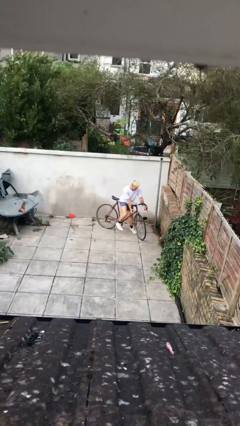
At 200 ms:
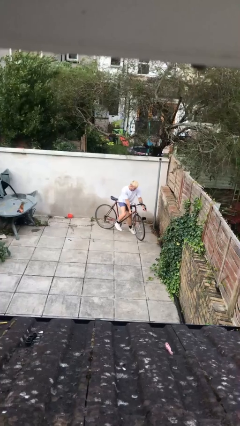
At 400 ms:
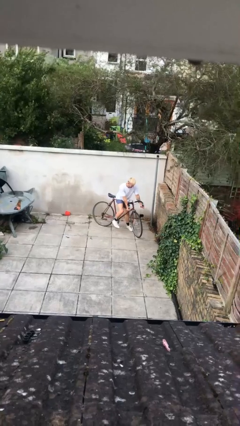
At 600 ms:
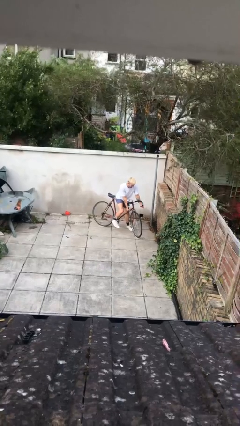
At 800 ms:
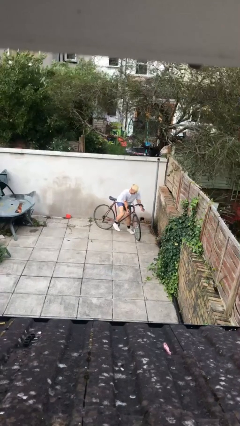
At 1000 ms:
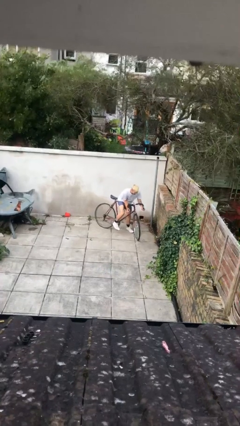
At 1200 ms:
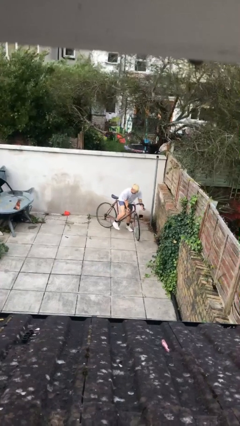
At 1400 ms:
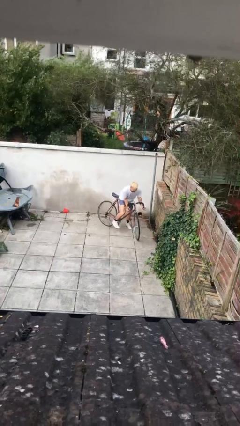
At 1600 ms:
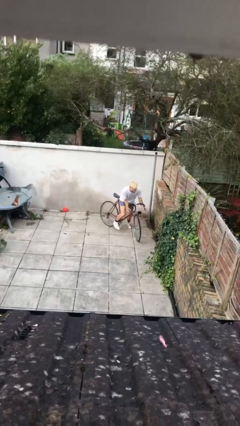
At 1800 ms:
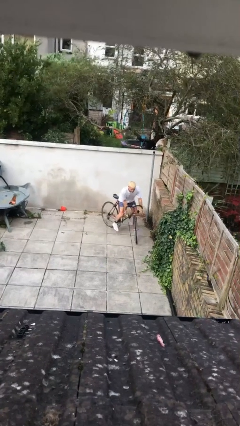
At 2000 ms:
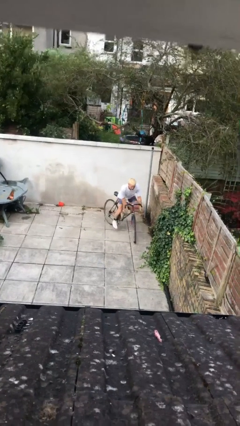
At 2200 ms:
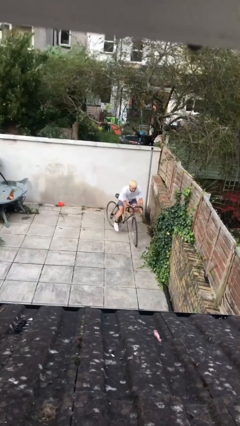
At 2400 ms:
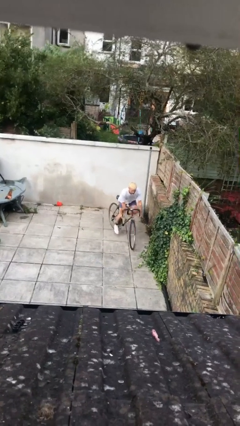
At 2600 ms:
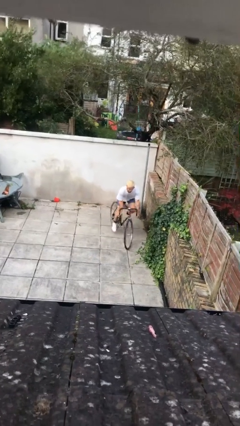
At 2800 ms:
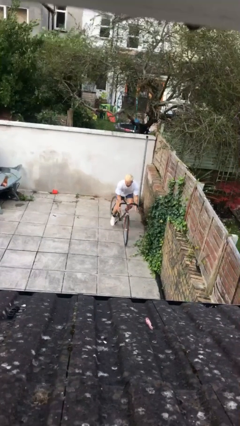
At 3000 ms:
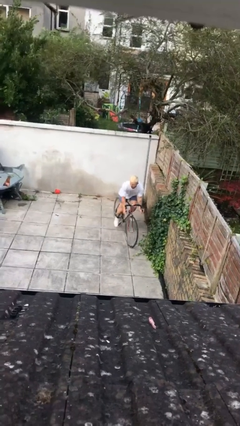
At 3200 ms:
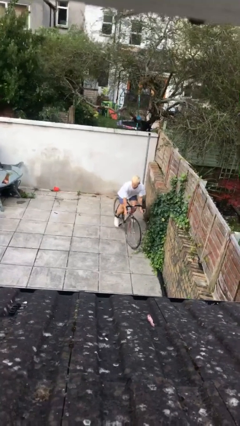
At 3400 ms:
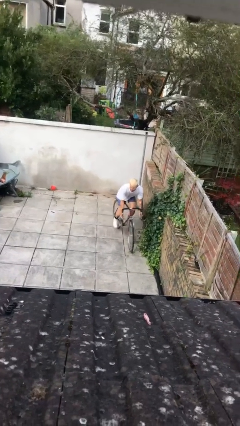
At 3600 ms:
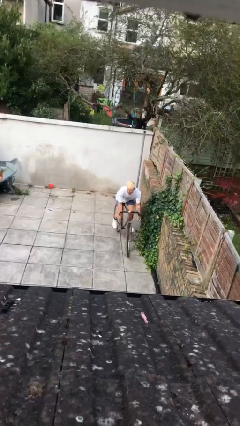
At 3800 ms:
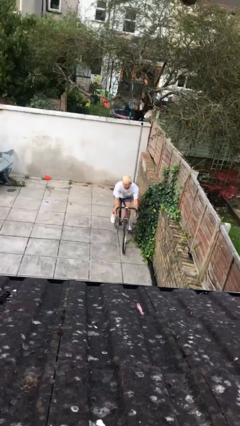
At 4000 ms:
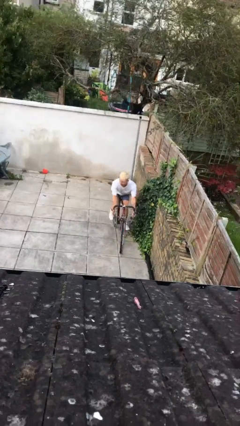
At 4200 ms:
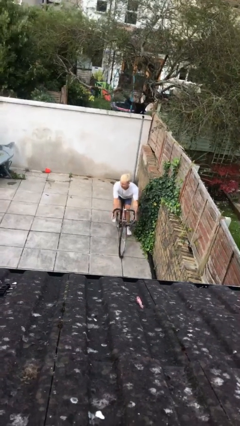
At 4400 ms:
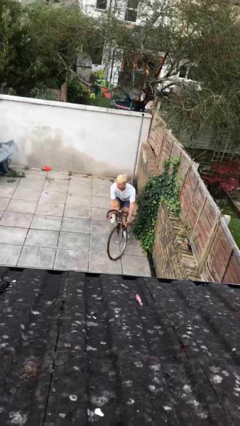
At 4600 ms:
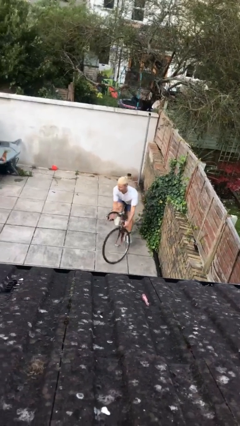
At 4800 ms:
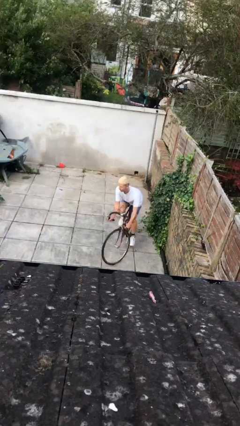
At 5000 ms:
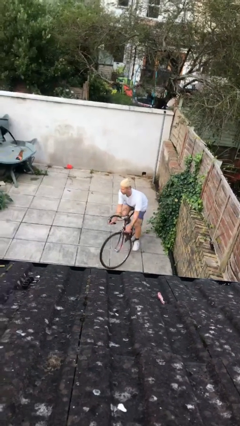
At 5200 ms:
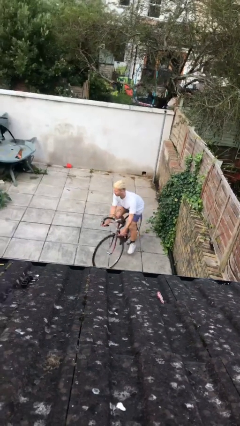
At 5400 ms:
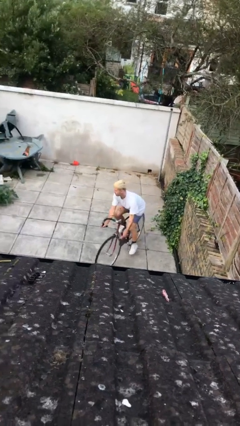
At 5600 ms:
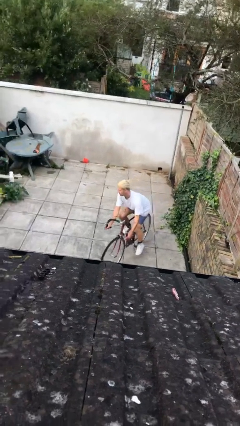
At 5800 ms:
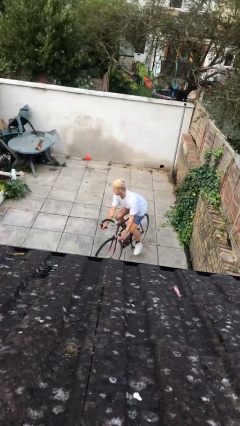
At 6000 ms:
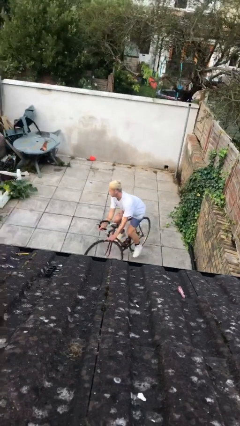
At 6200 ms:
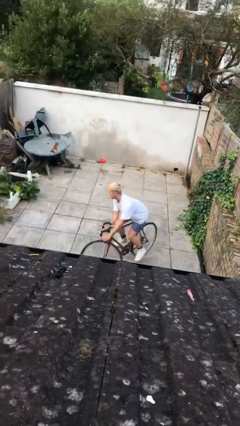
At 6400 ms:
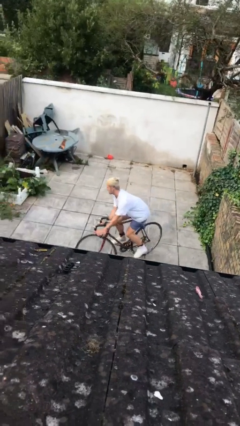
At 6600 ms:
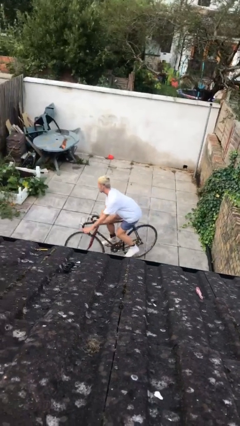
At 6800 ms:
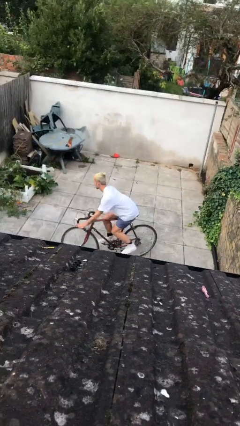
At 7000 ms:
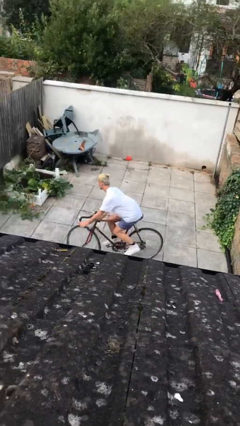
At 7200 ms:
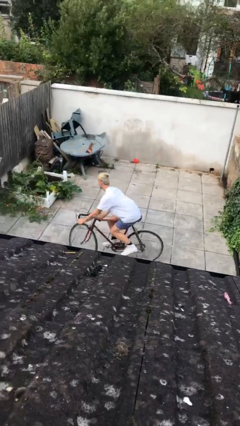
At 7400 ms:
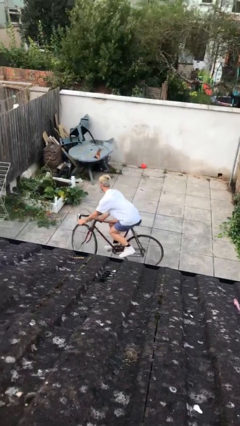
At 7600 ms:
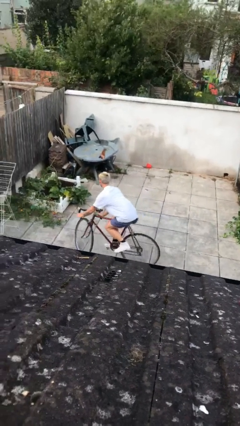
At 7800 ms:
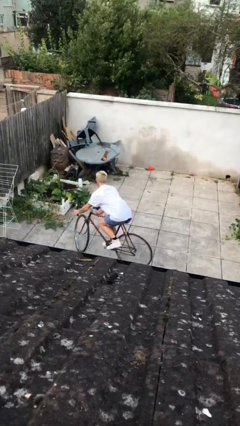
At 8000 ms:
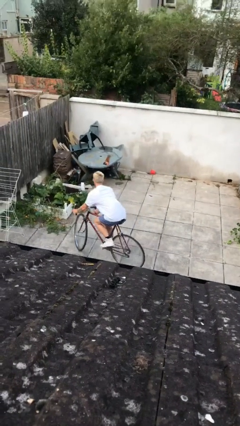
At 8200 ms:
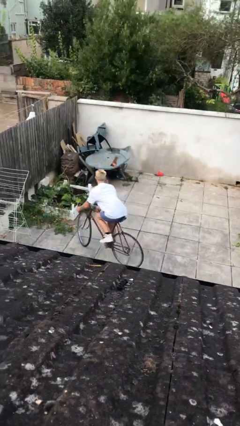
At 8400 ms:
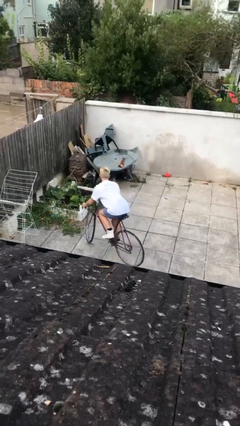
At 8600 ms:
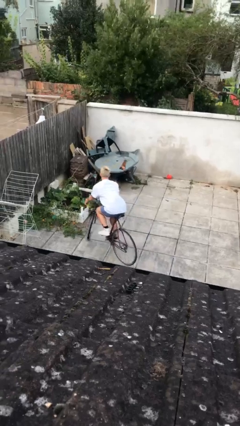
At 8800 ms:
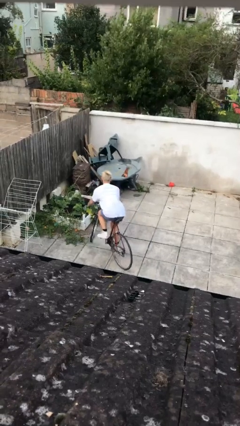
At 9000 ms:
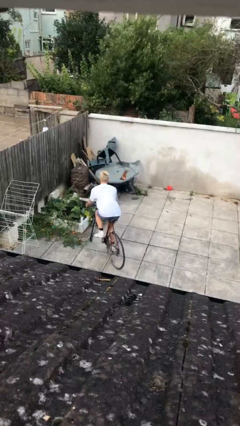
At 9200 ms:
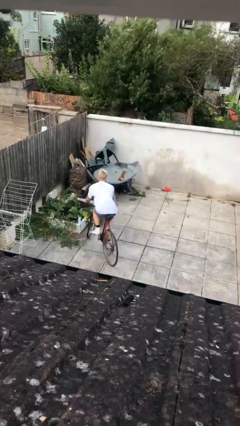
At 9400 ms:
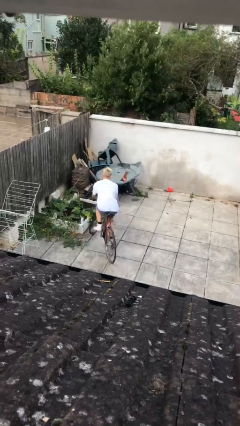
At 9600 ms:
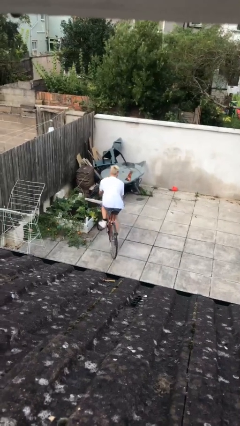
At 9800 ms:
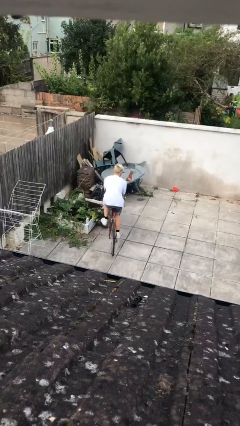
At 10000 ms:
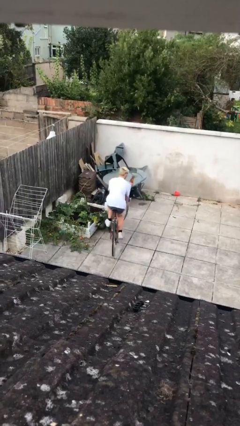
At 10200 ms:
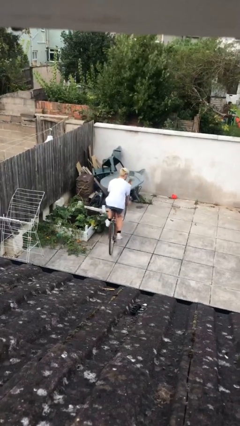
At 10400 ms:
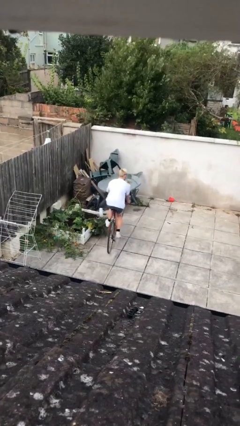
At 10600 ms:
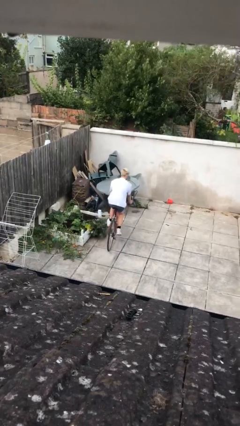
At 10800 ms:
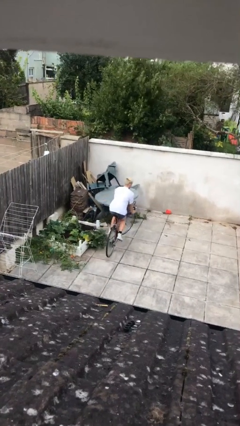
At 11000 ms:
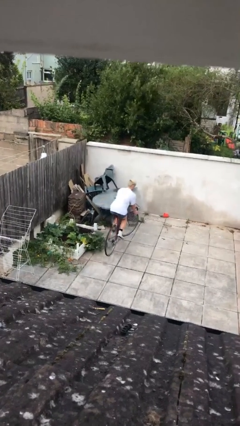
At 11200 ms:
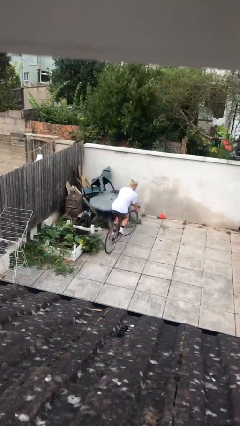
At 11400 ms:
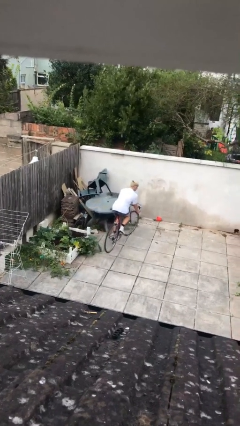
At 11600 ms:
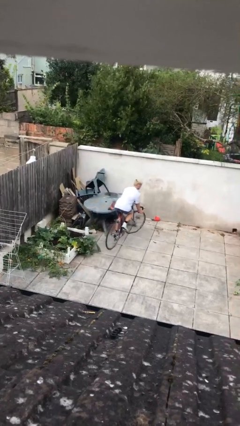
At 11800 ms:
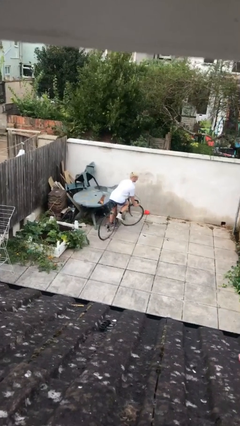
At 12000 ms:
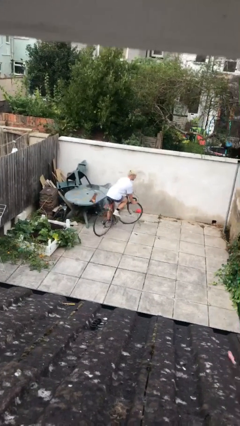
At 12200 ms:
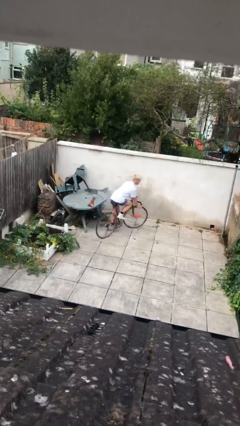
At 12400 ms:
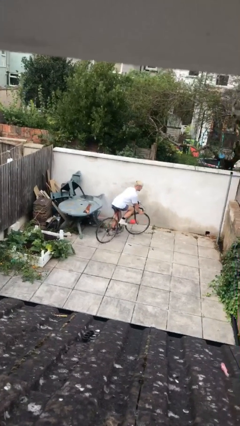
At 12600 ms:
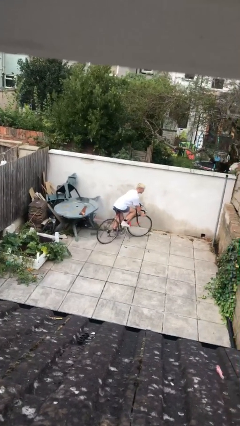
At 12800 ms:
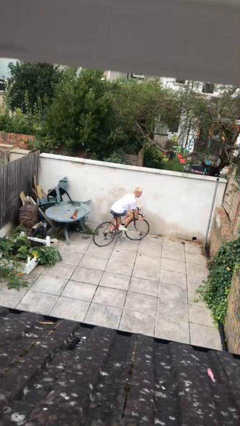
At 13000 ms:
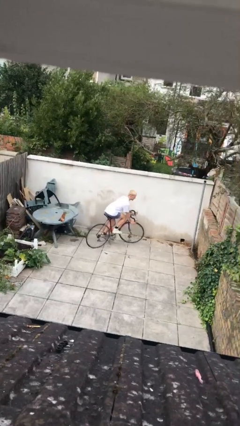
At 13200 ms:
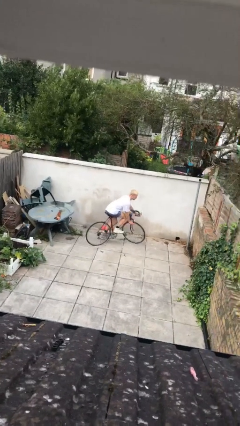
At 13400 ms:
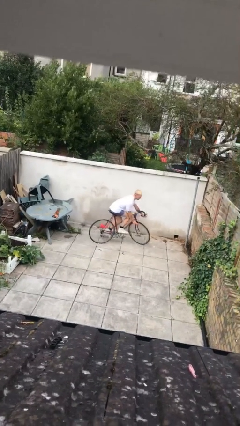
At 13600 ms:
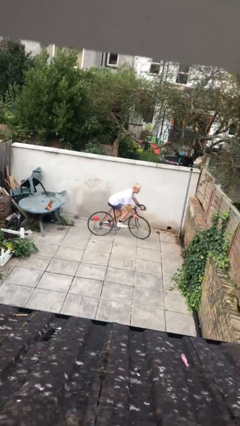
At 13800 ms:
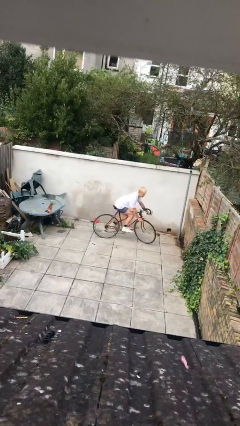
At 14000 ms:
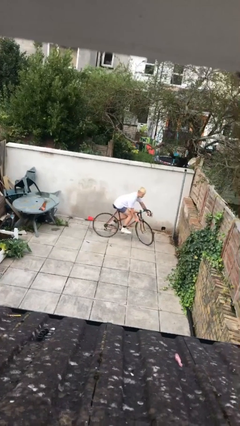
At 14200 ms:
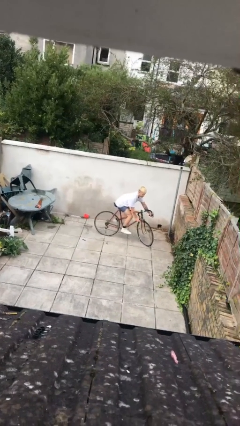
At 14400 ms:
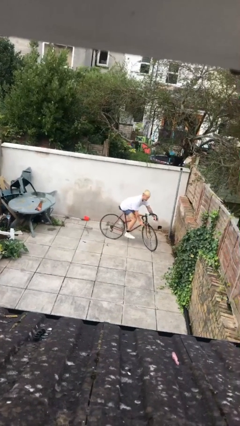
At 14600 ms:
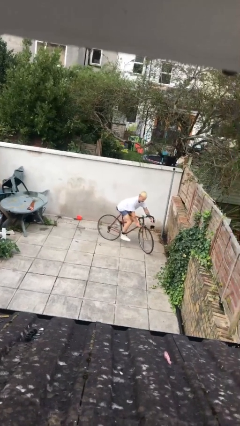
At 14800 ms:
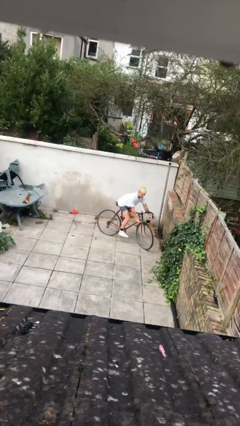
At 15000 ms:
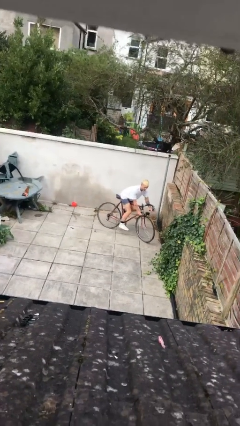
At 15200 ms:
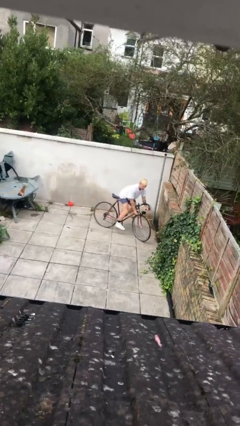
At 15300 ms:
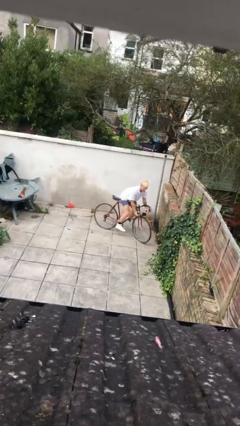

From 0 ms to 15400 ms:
person rides bicycle

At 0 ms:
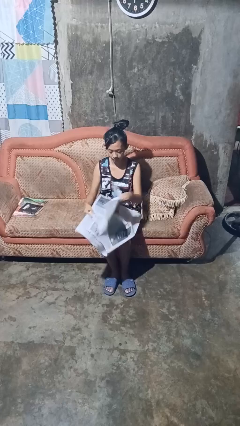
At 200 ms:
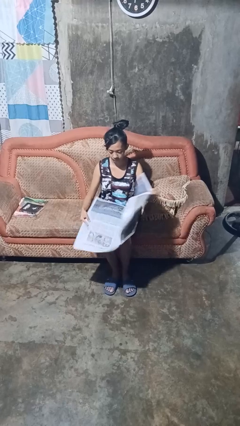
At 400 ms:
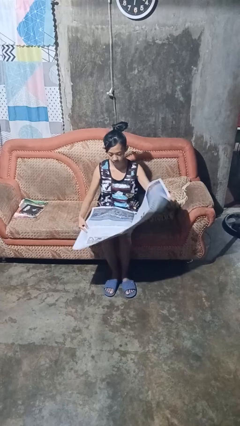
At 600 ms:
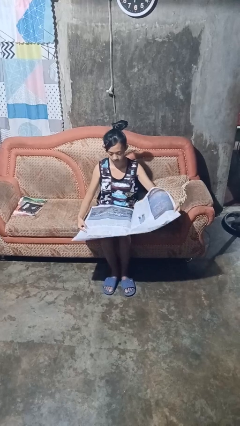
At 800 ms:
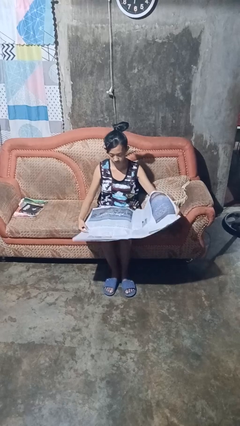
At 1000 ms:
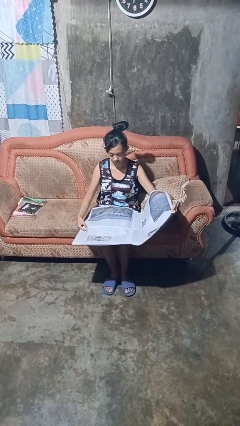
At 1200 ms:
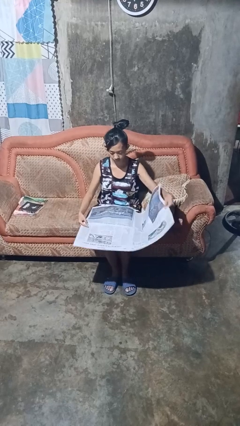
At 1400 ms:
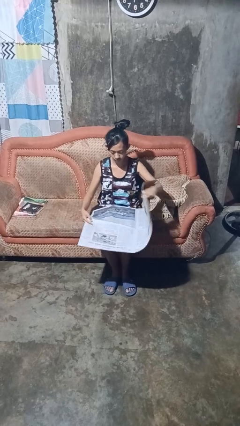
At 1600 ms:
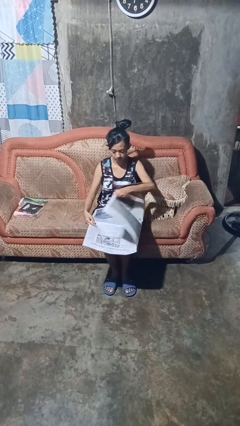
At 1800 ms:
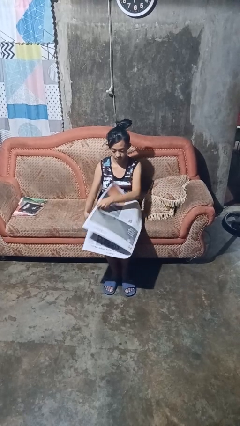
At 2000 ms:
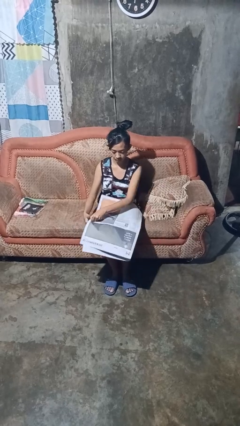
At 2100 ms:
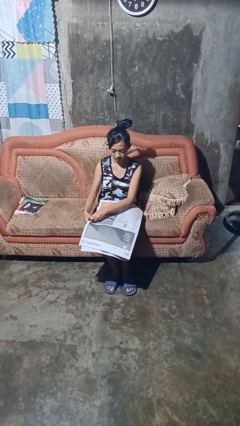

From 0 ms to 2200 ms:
person reads newspaper

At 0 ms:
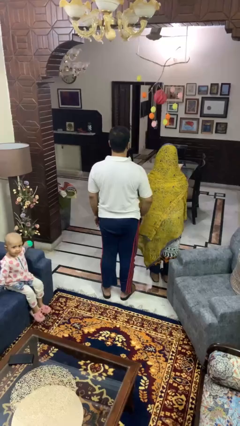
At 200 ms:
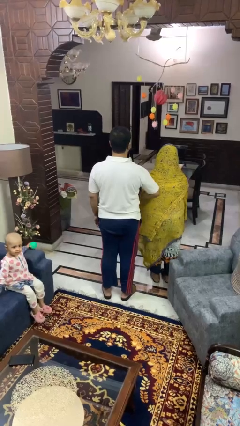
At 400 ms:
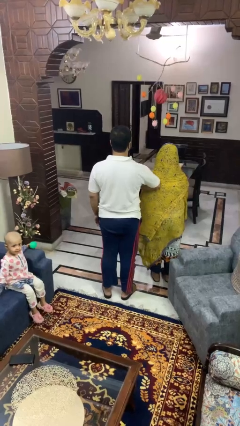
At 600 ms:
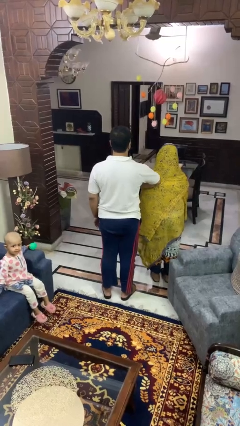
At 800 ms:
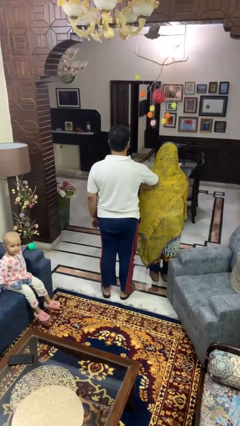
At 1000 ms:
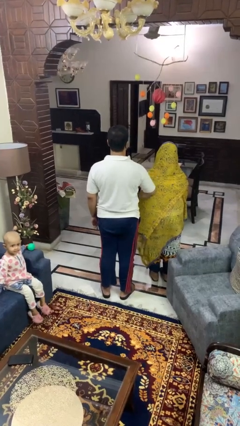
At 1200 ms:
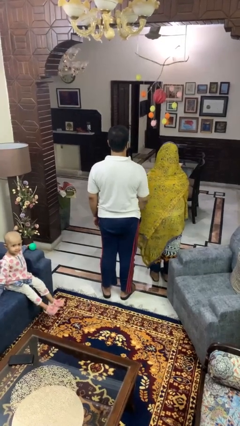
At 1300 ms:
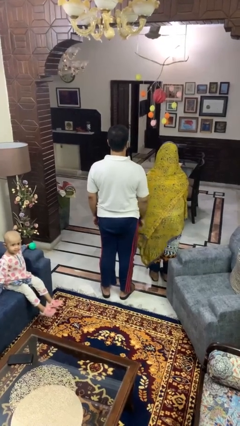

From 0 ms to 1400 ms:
person nudges person with elbow
